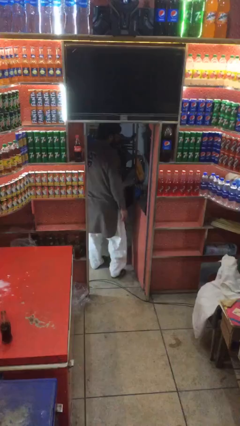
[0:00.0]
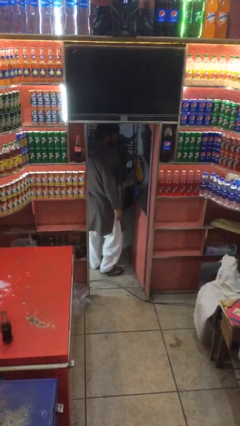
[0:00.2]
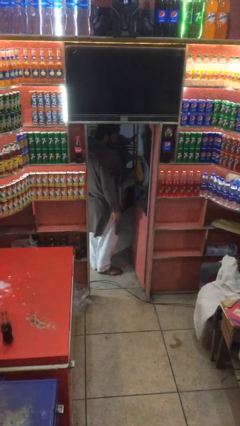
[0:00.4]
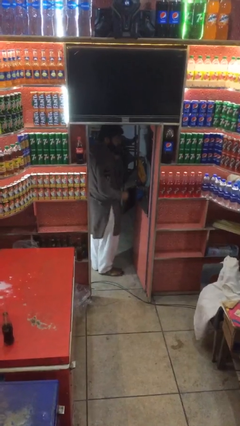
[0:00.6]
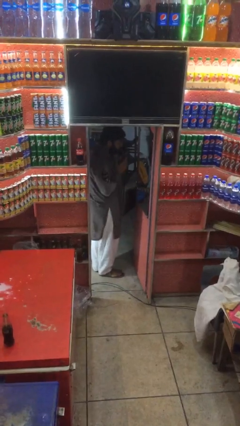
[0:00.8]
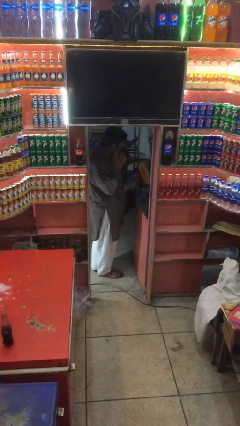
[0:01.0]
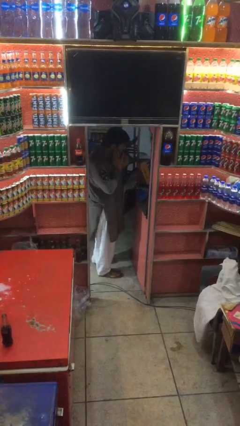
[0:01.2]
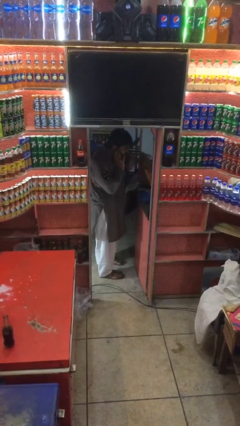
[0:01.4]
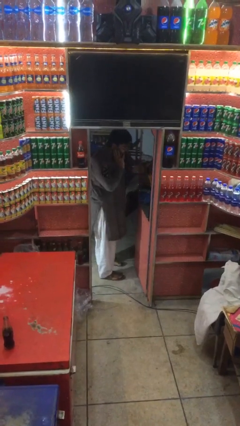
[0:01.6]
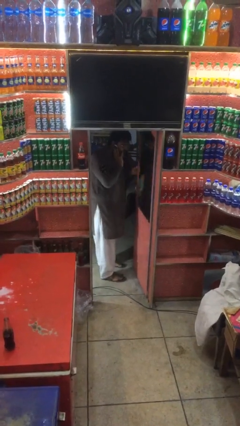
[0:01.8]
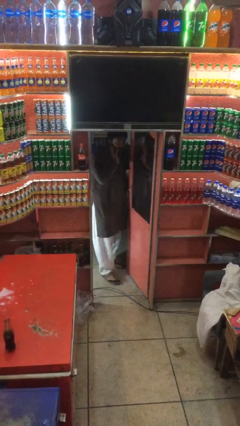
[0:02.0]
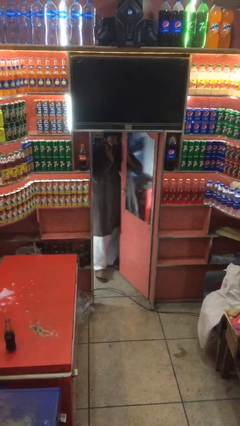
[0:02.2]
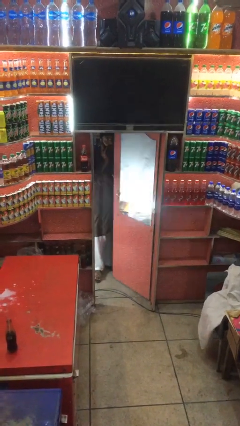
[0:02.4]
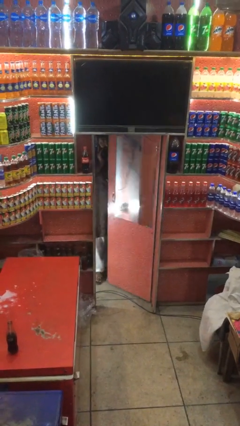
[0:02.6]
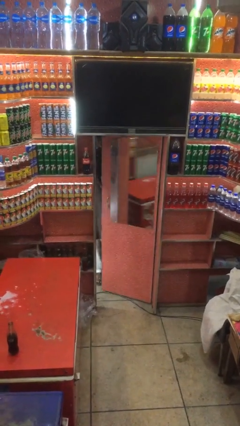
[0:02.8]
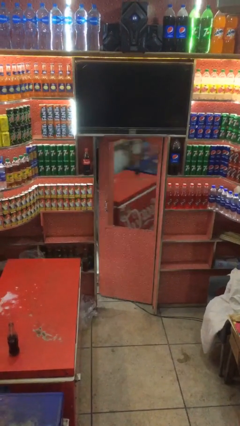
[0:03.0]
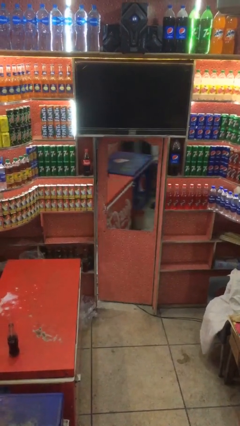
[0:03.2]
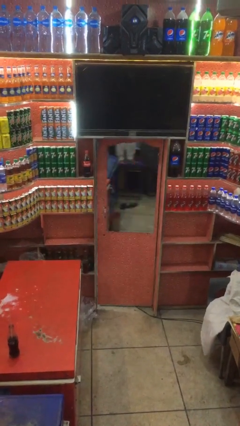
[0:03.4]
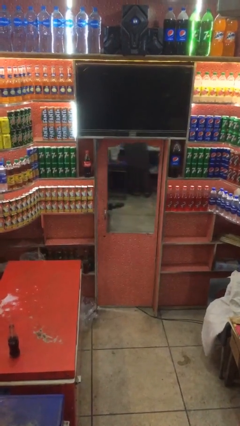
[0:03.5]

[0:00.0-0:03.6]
person closes facility door

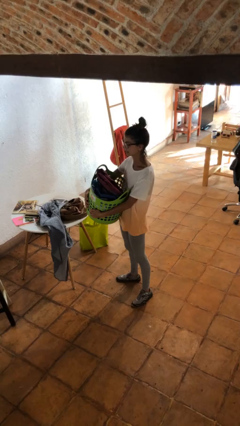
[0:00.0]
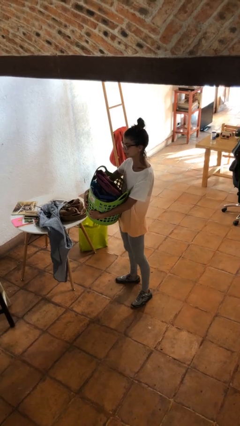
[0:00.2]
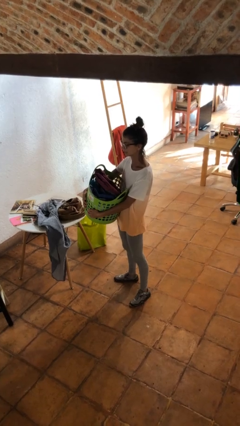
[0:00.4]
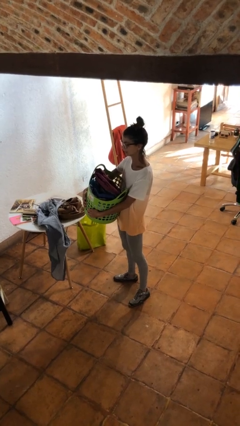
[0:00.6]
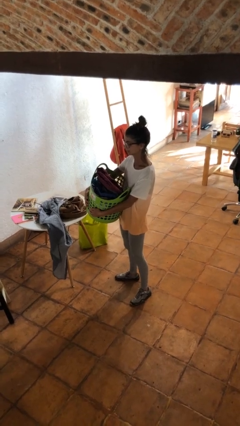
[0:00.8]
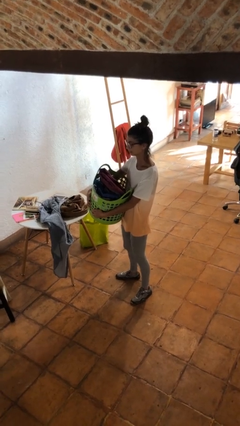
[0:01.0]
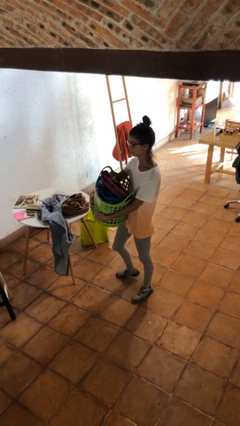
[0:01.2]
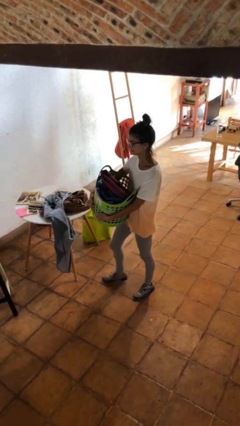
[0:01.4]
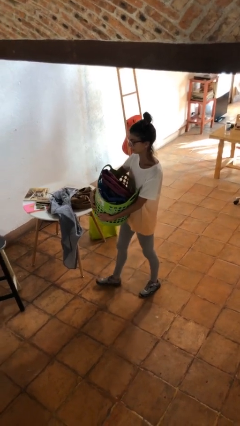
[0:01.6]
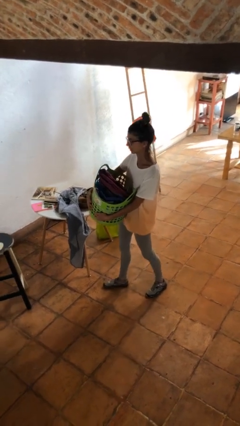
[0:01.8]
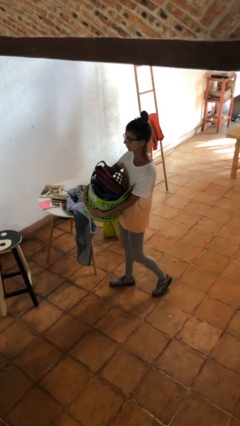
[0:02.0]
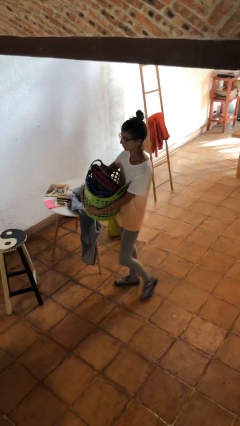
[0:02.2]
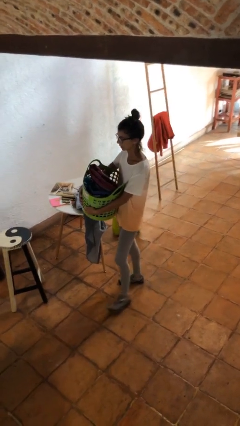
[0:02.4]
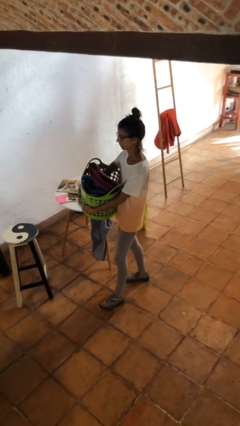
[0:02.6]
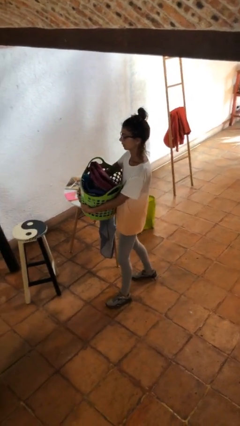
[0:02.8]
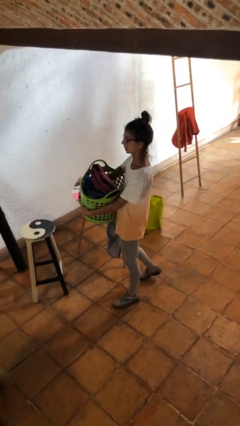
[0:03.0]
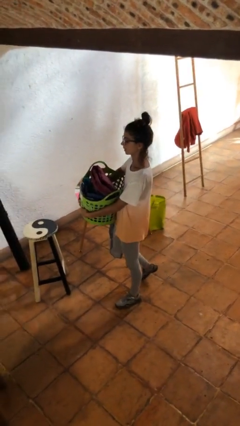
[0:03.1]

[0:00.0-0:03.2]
person carries laundry basket

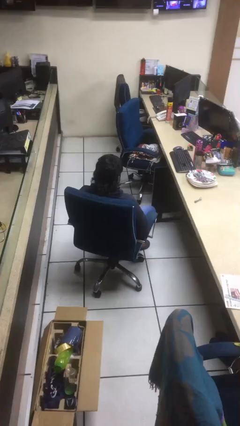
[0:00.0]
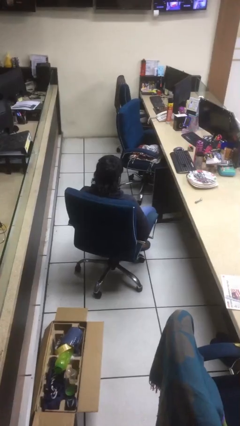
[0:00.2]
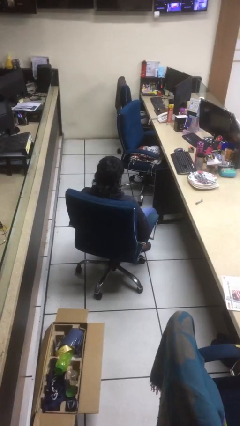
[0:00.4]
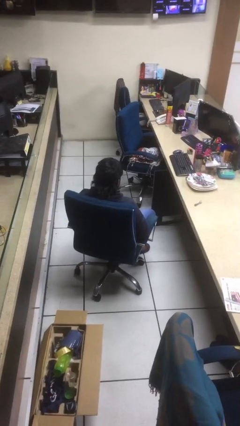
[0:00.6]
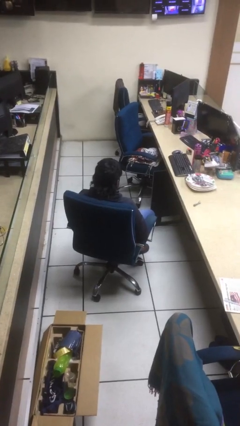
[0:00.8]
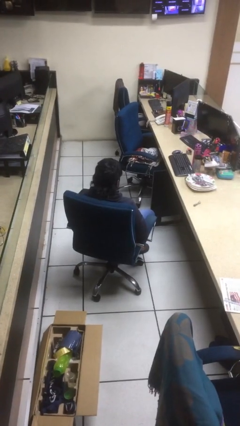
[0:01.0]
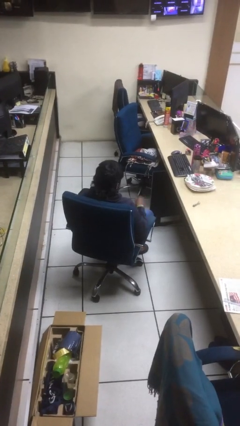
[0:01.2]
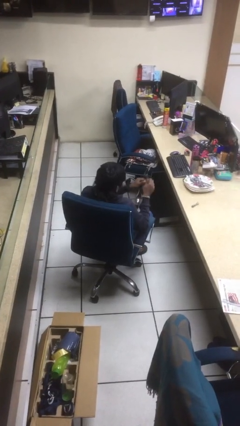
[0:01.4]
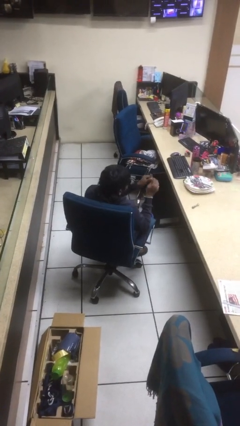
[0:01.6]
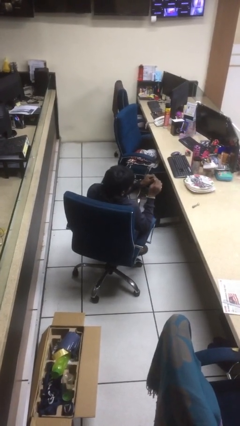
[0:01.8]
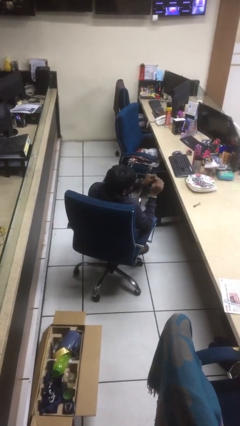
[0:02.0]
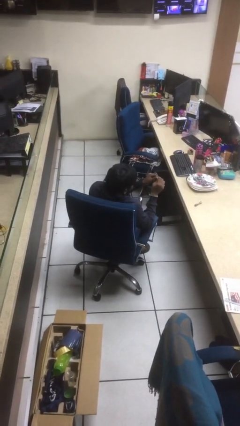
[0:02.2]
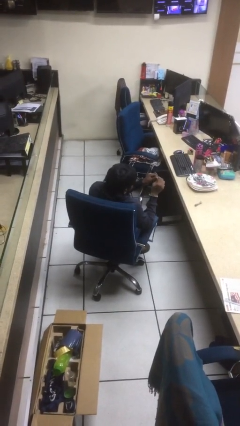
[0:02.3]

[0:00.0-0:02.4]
person files fingernails

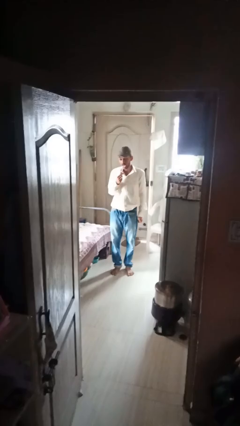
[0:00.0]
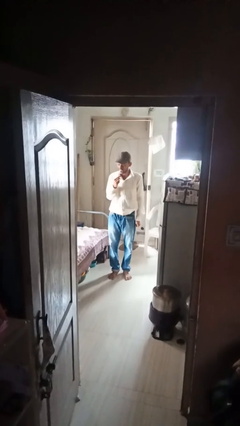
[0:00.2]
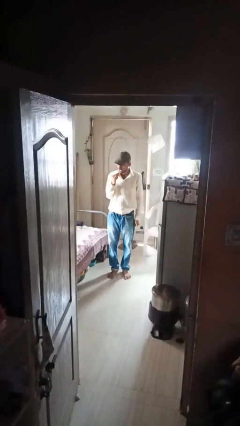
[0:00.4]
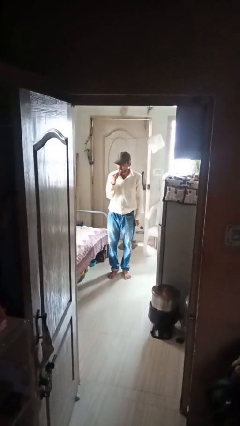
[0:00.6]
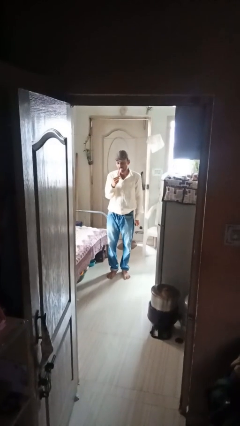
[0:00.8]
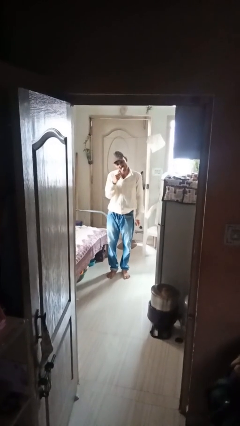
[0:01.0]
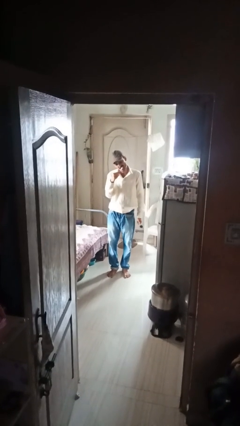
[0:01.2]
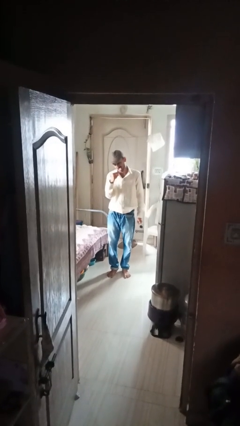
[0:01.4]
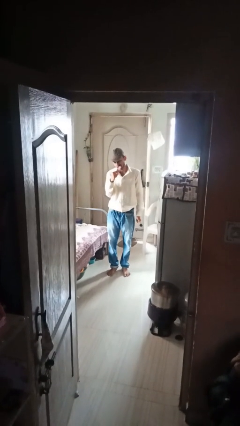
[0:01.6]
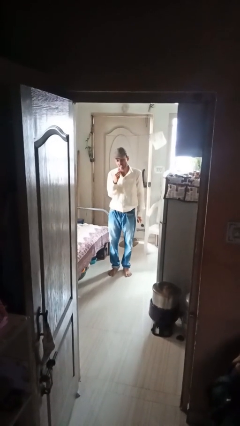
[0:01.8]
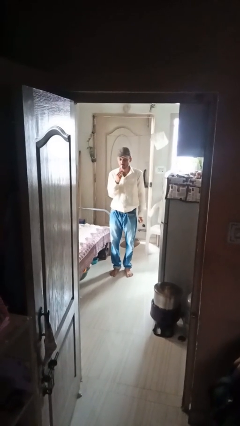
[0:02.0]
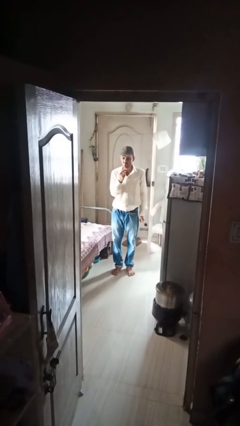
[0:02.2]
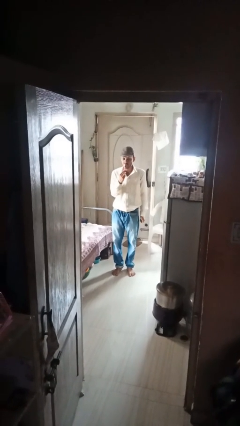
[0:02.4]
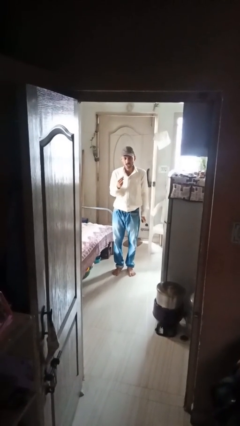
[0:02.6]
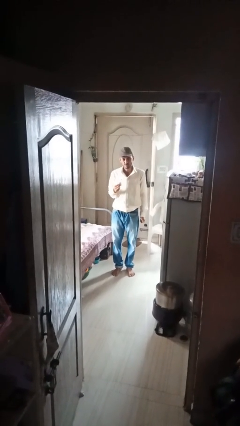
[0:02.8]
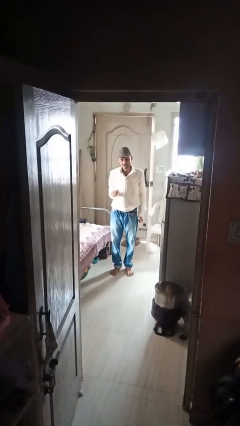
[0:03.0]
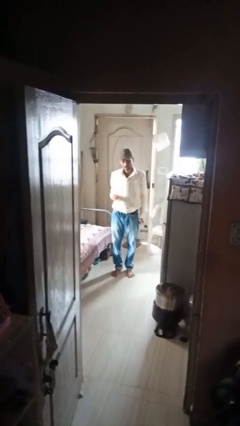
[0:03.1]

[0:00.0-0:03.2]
person brushes teeth

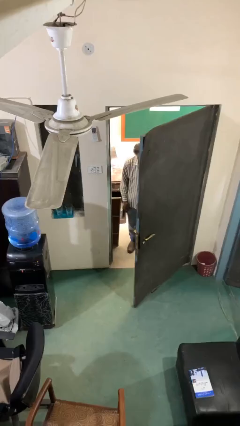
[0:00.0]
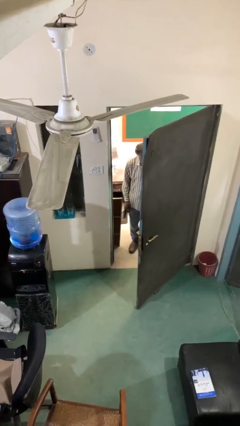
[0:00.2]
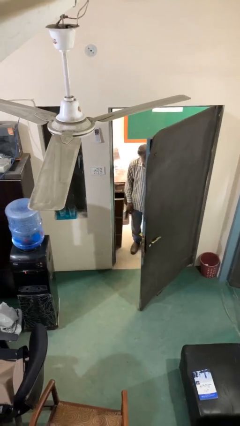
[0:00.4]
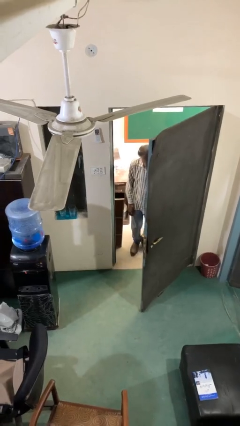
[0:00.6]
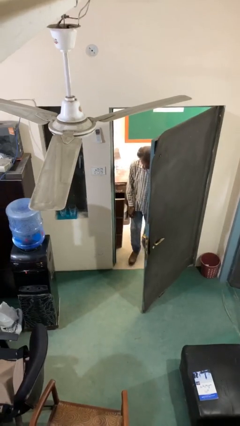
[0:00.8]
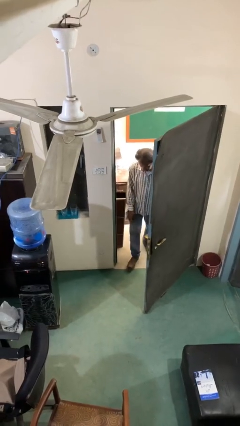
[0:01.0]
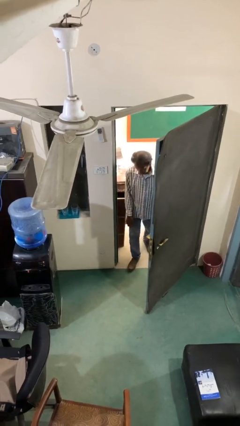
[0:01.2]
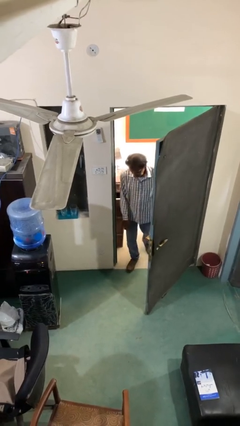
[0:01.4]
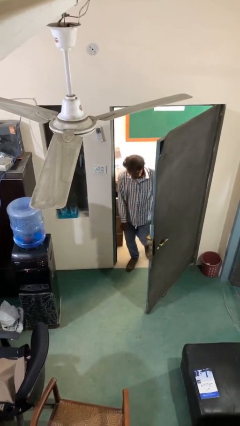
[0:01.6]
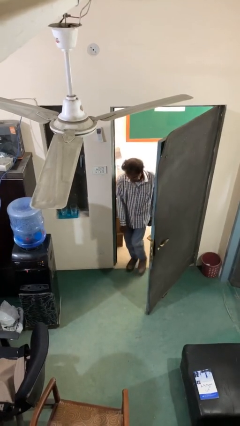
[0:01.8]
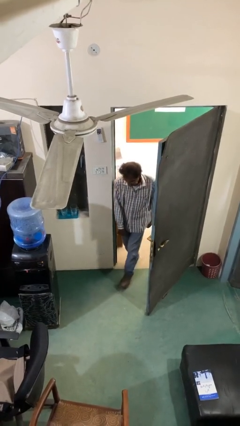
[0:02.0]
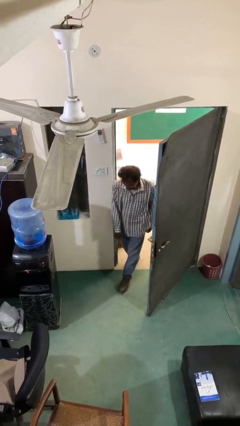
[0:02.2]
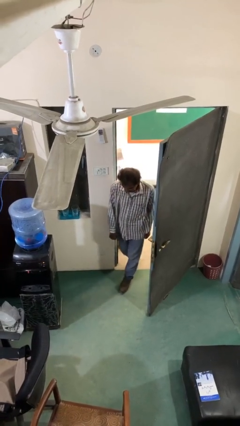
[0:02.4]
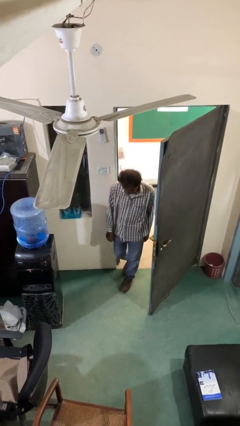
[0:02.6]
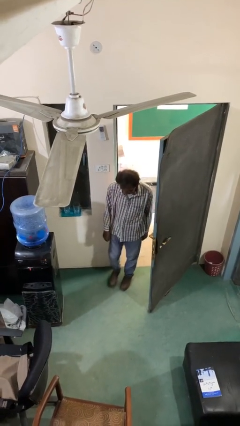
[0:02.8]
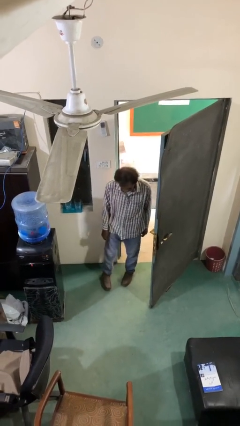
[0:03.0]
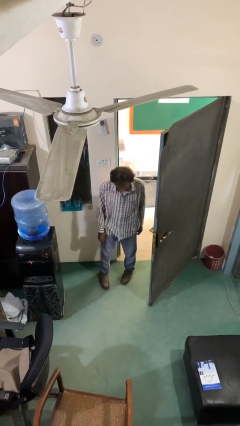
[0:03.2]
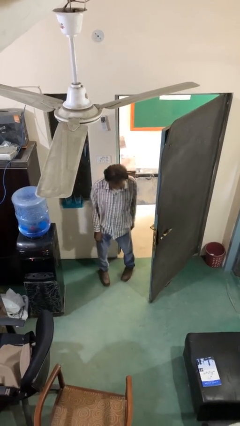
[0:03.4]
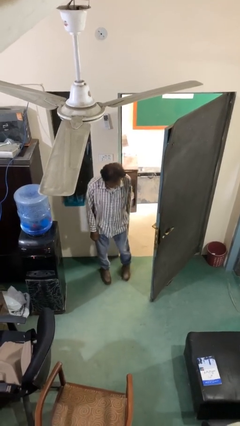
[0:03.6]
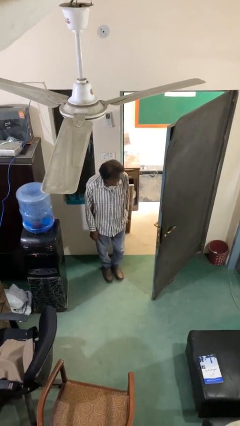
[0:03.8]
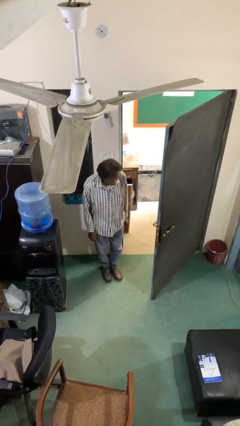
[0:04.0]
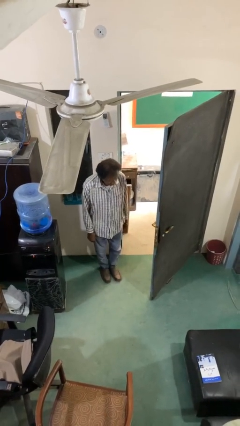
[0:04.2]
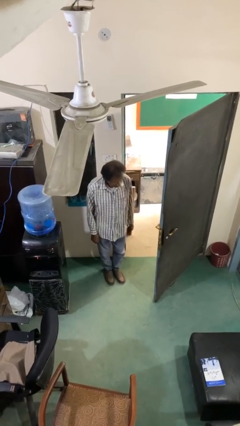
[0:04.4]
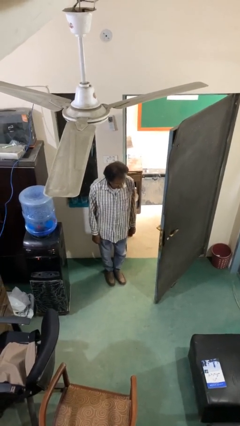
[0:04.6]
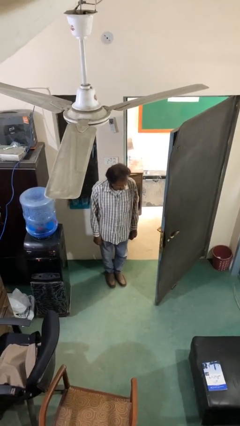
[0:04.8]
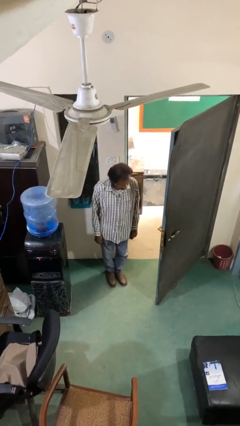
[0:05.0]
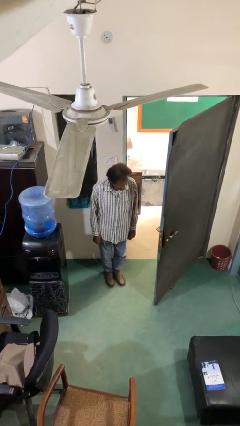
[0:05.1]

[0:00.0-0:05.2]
person enters scene through structure
